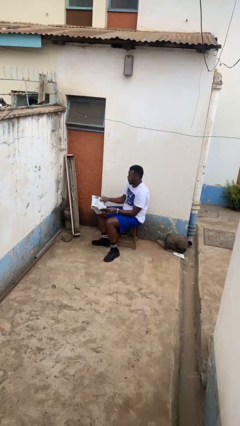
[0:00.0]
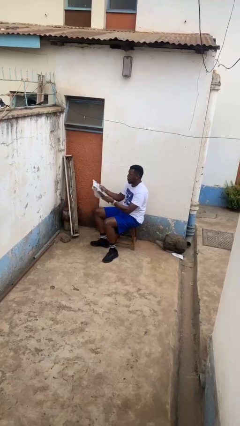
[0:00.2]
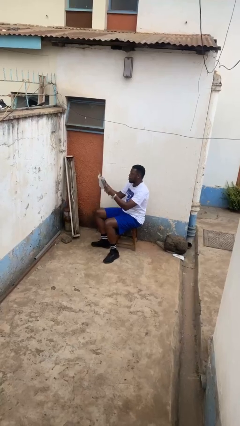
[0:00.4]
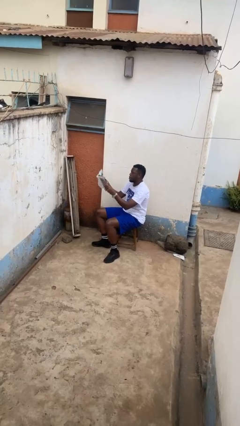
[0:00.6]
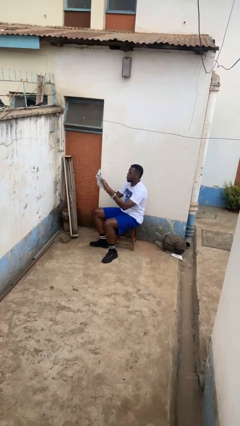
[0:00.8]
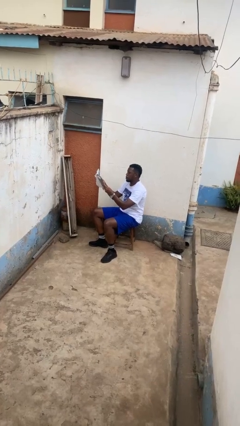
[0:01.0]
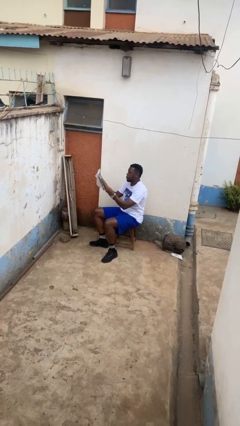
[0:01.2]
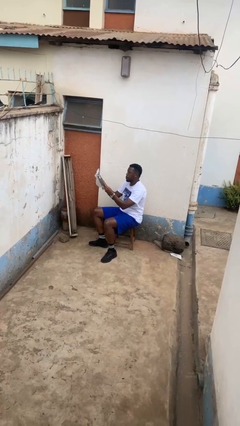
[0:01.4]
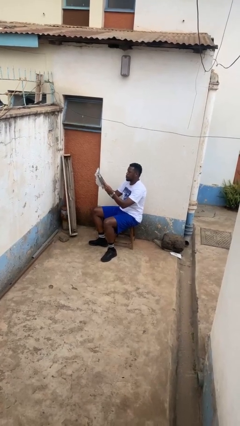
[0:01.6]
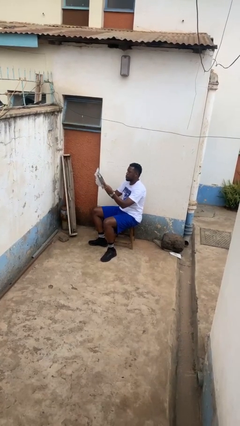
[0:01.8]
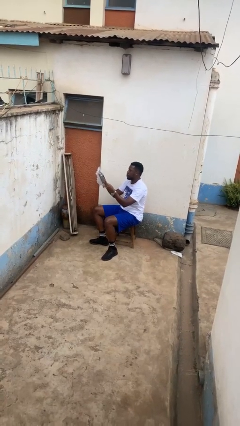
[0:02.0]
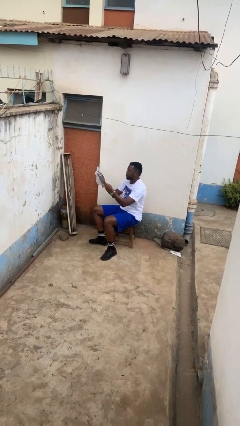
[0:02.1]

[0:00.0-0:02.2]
person reads magazine

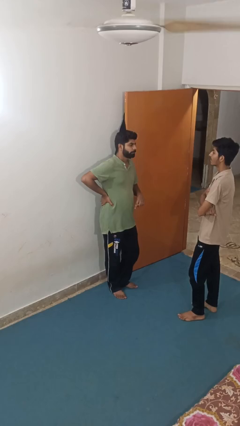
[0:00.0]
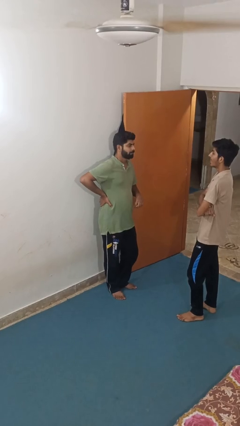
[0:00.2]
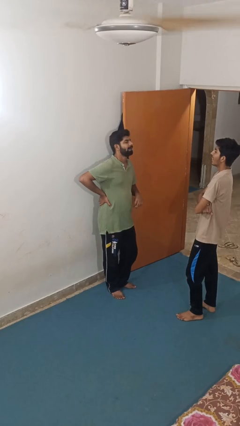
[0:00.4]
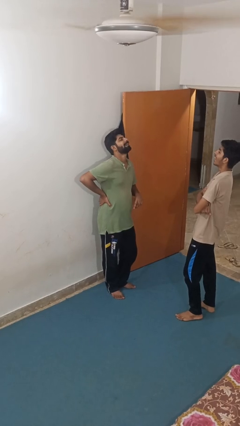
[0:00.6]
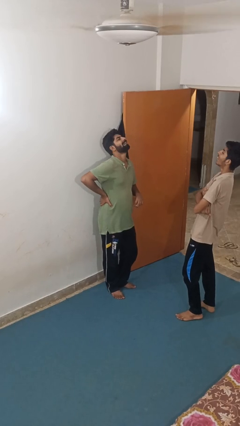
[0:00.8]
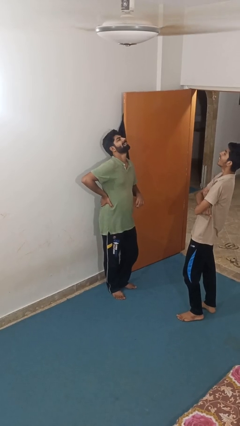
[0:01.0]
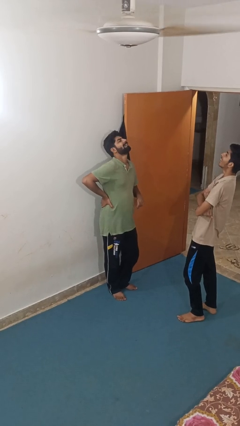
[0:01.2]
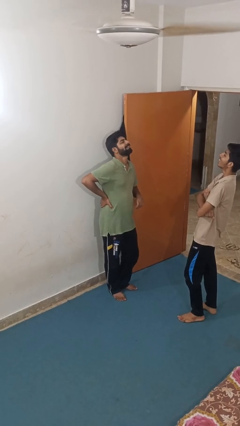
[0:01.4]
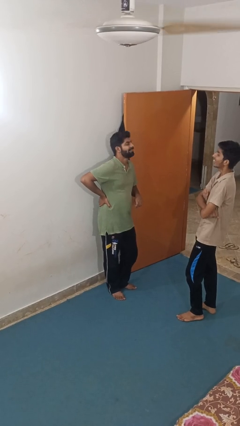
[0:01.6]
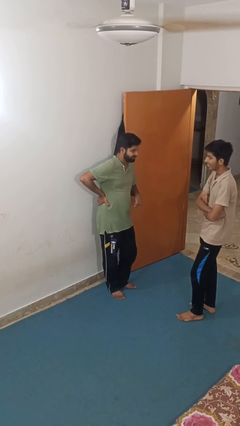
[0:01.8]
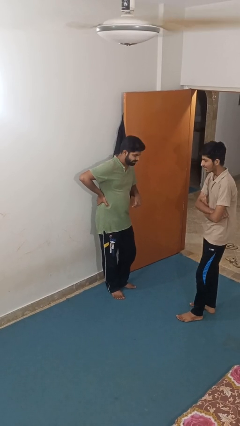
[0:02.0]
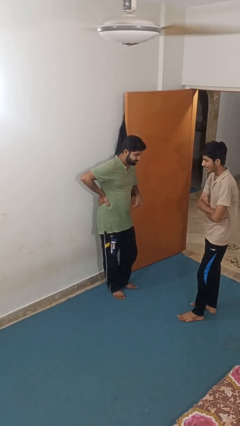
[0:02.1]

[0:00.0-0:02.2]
person laughs with person

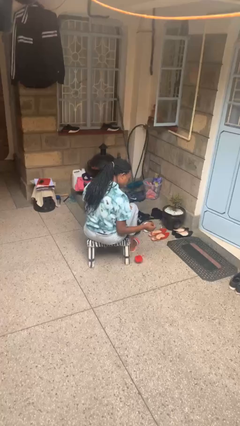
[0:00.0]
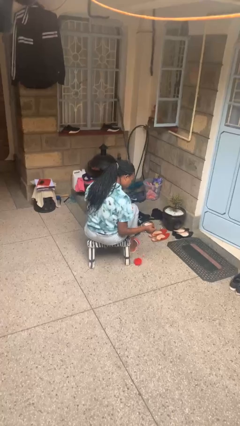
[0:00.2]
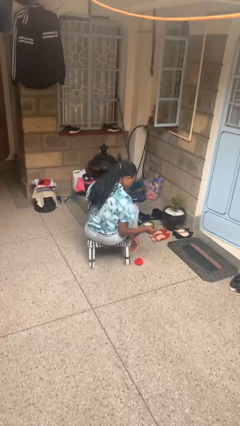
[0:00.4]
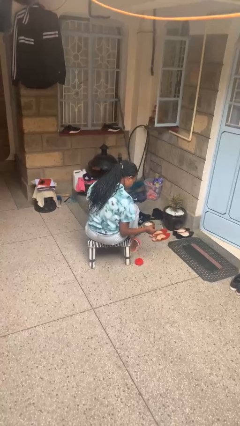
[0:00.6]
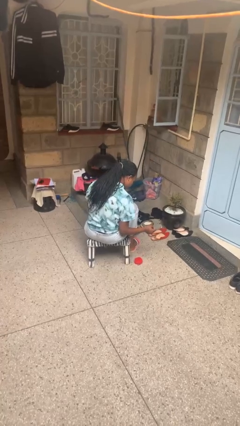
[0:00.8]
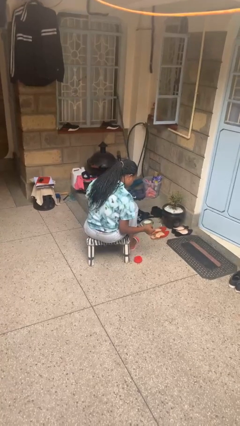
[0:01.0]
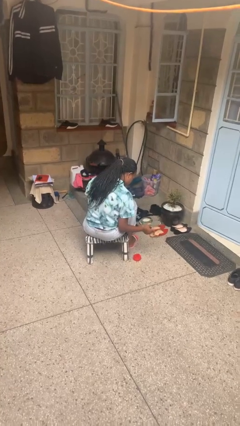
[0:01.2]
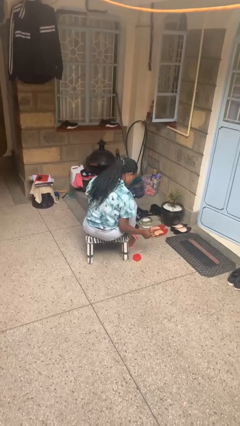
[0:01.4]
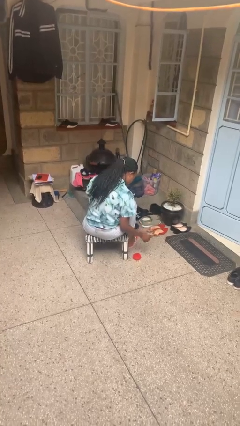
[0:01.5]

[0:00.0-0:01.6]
person drops object

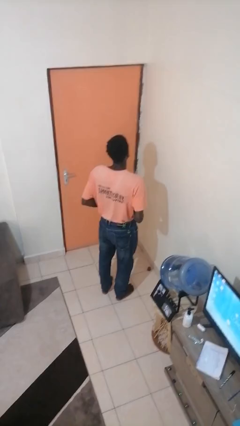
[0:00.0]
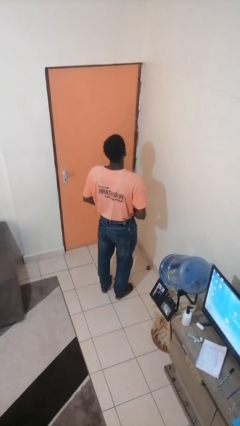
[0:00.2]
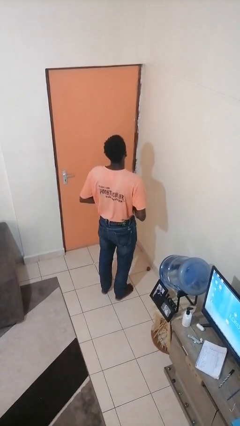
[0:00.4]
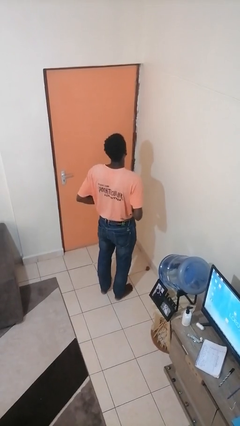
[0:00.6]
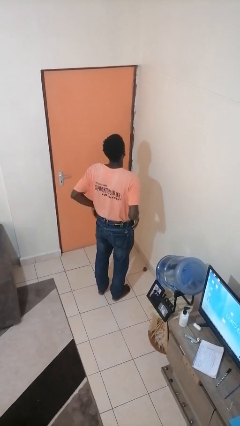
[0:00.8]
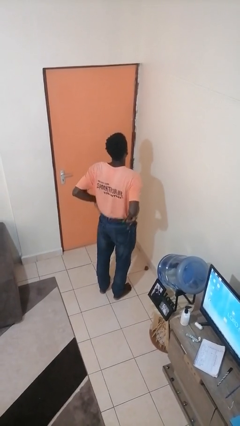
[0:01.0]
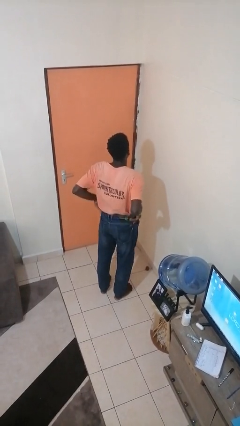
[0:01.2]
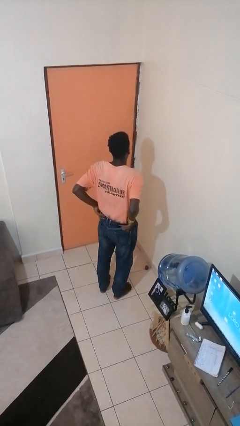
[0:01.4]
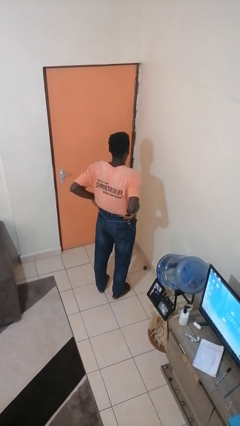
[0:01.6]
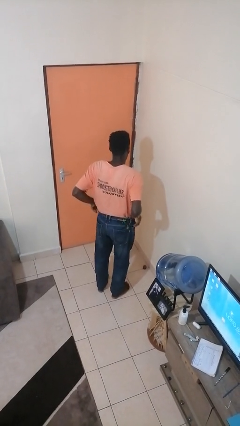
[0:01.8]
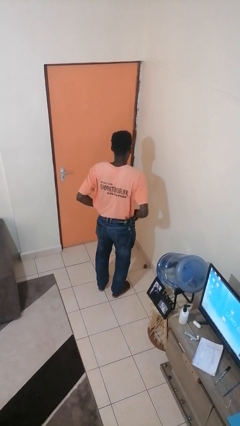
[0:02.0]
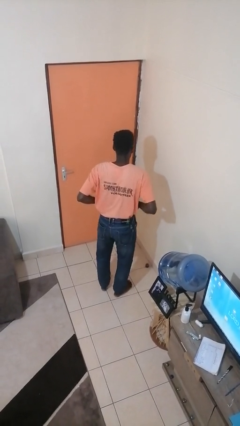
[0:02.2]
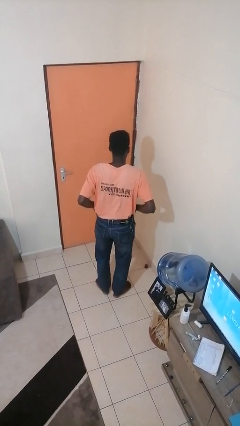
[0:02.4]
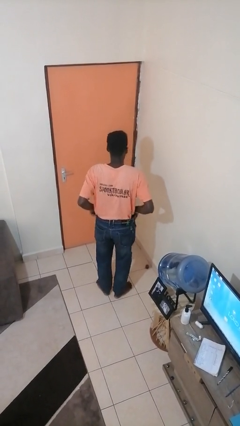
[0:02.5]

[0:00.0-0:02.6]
person hikes up pants

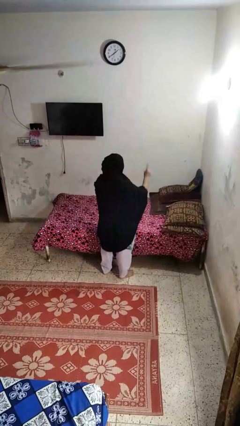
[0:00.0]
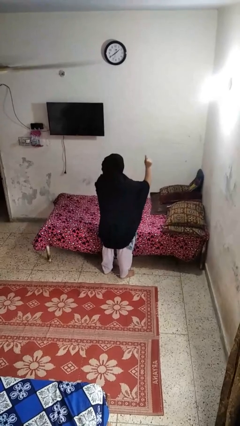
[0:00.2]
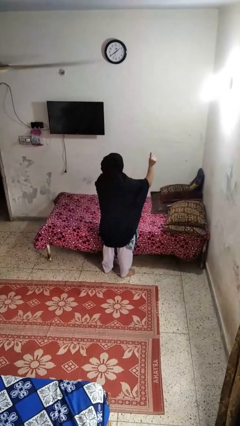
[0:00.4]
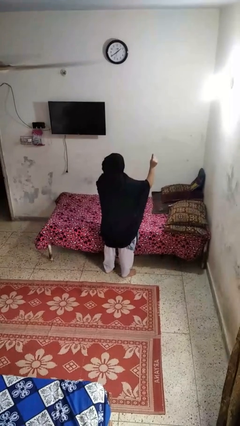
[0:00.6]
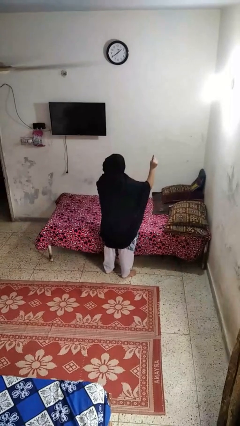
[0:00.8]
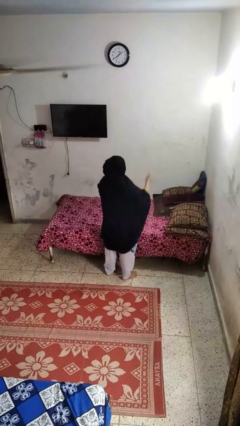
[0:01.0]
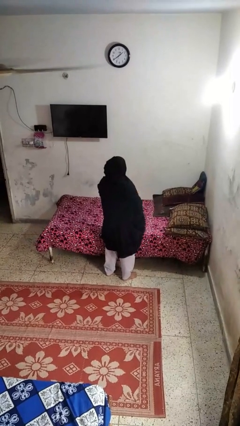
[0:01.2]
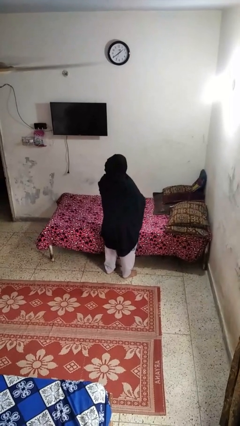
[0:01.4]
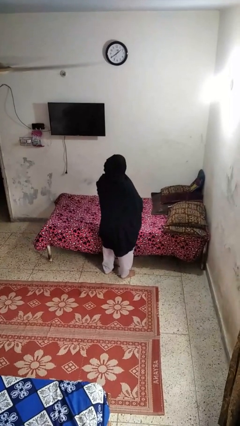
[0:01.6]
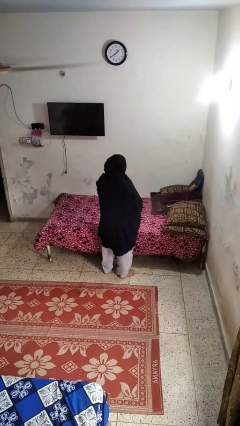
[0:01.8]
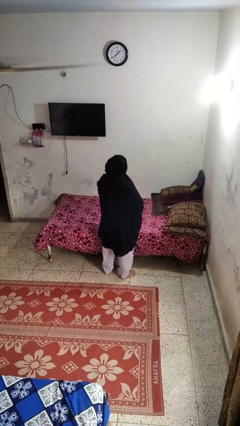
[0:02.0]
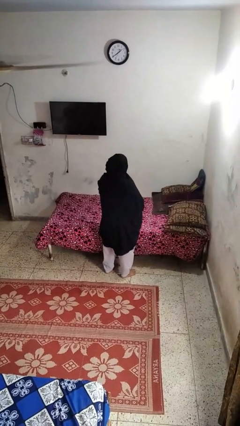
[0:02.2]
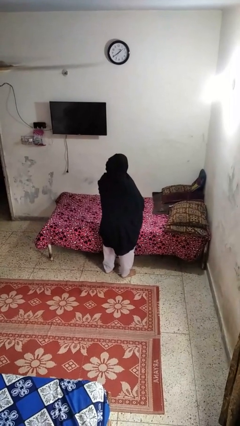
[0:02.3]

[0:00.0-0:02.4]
person gestures number one

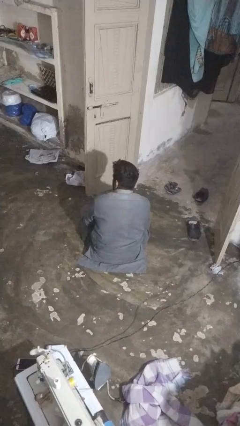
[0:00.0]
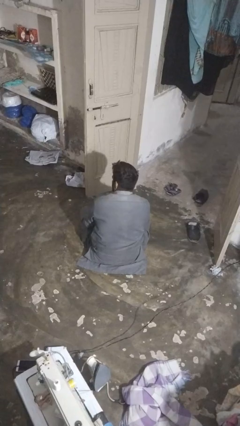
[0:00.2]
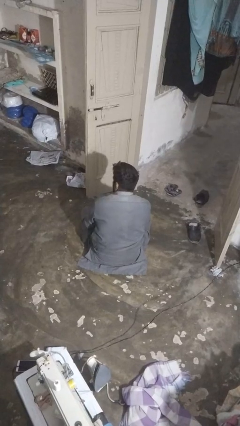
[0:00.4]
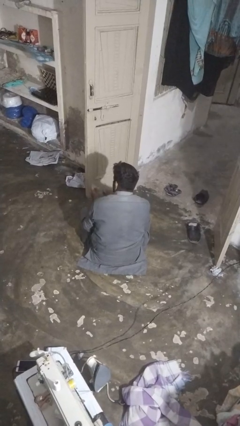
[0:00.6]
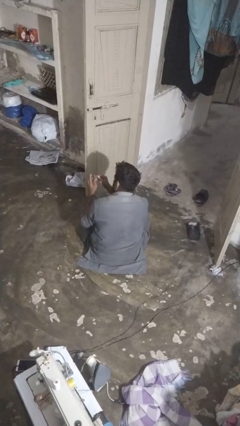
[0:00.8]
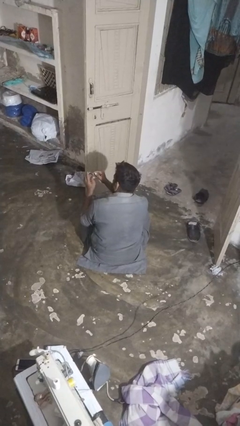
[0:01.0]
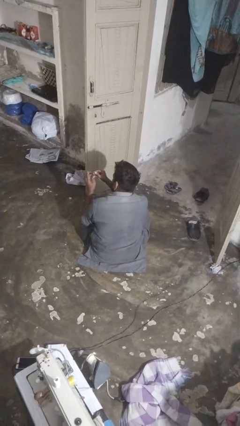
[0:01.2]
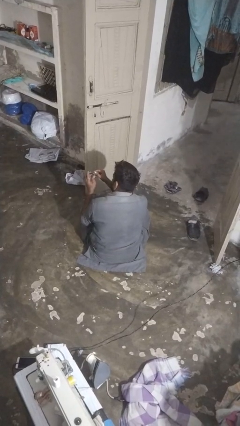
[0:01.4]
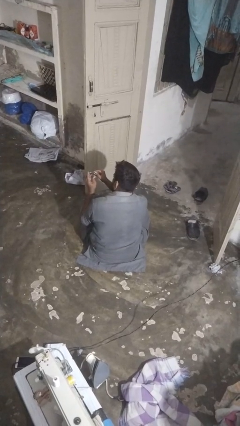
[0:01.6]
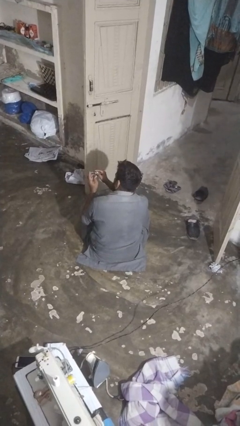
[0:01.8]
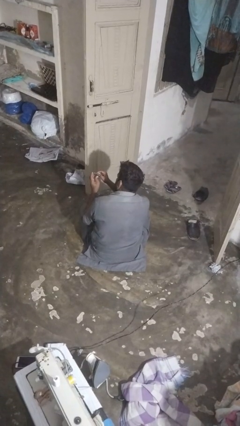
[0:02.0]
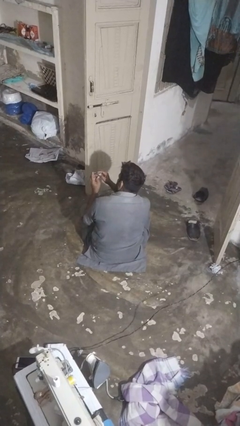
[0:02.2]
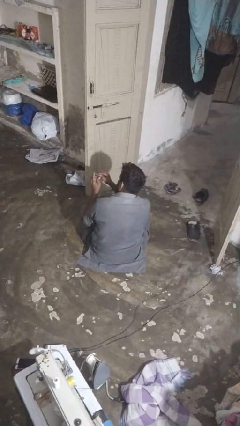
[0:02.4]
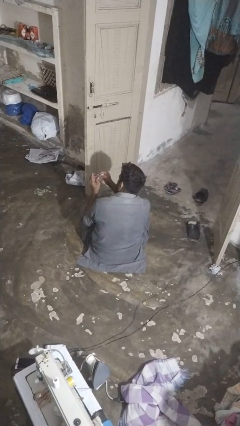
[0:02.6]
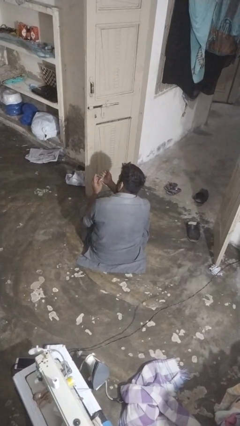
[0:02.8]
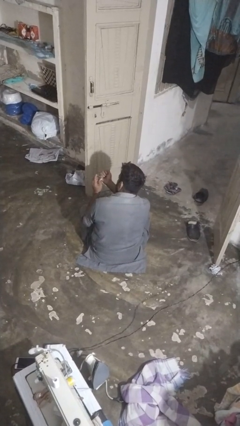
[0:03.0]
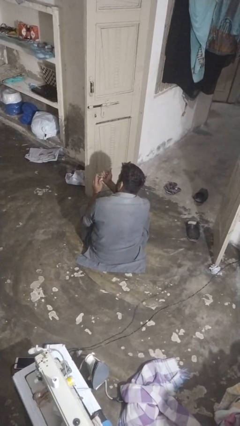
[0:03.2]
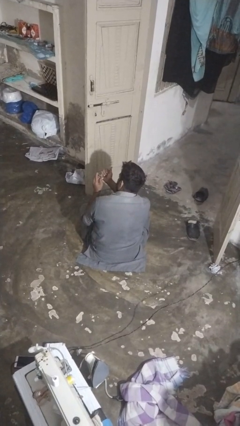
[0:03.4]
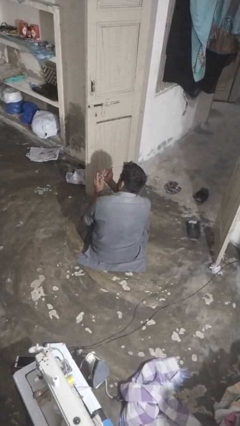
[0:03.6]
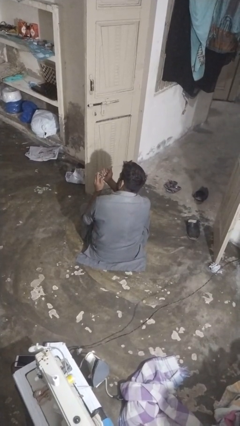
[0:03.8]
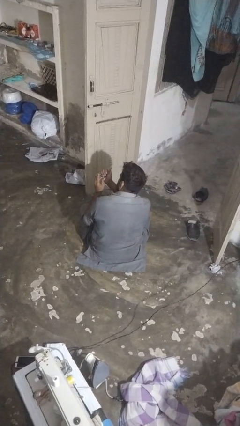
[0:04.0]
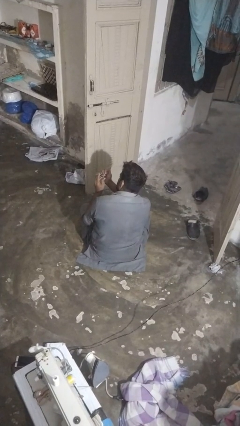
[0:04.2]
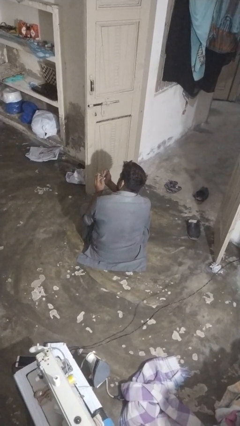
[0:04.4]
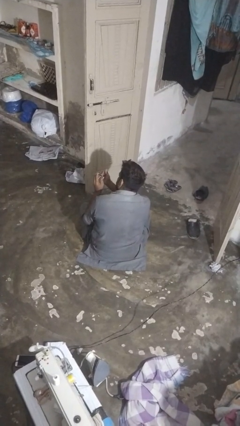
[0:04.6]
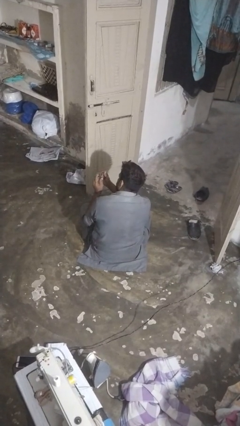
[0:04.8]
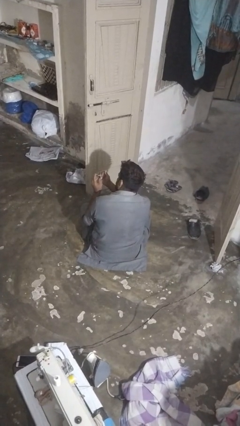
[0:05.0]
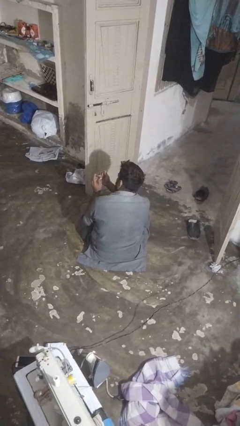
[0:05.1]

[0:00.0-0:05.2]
person clips fingernails

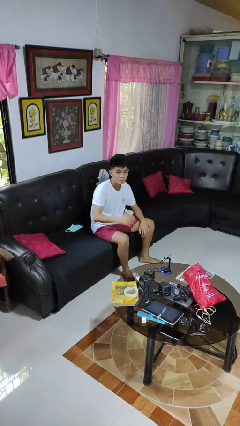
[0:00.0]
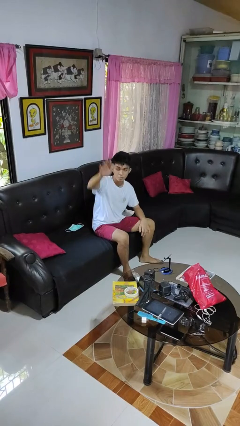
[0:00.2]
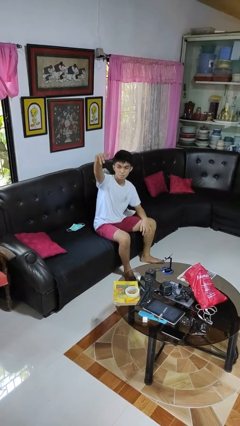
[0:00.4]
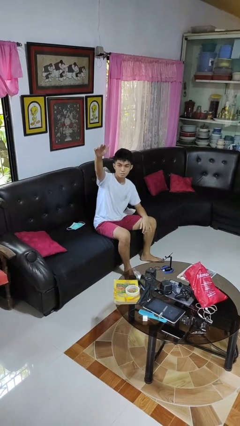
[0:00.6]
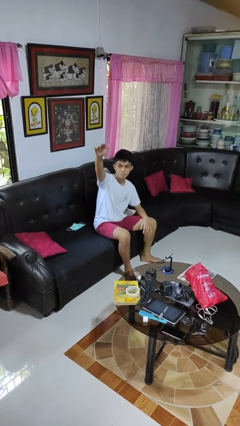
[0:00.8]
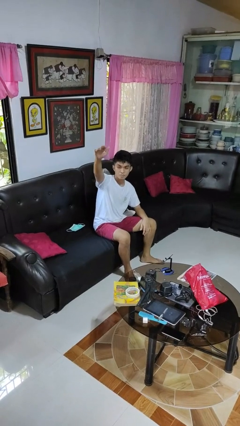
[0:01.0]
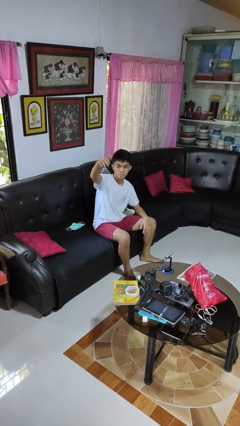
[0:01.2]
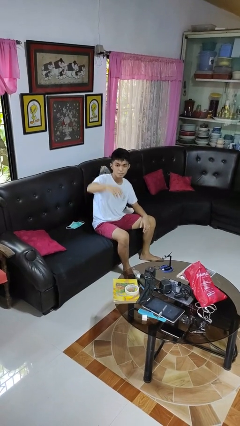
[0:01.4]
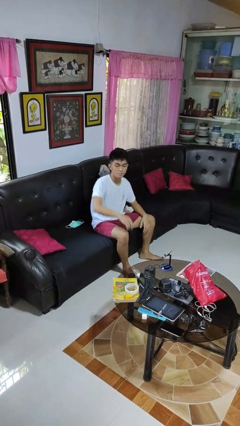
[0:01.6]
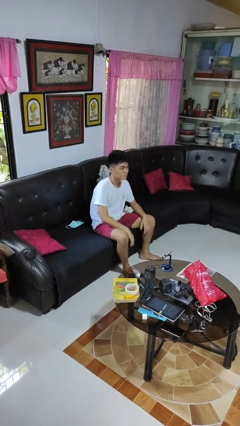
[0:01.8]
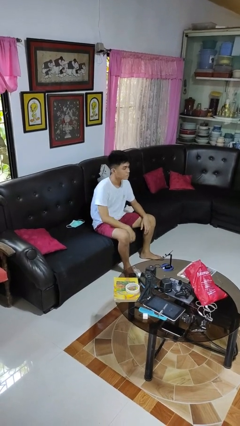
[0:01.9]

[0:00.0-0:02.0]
person gestures come here
